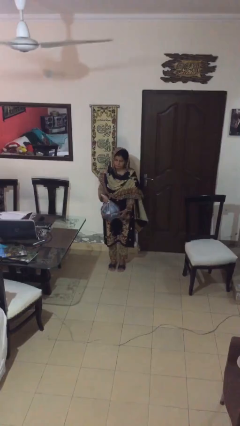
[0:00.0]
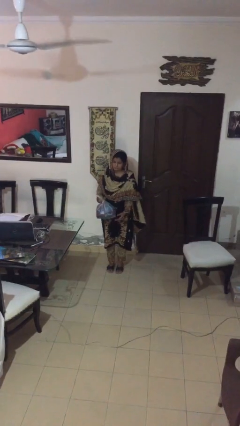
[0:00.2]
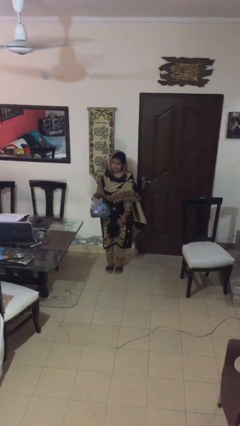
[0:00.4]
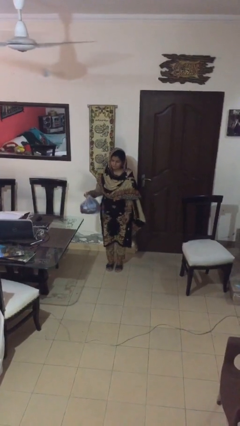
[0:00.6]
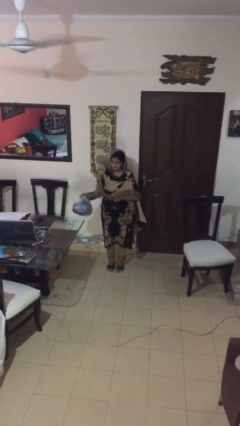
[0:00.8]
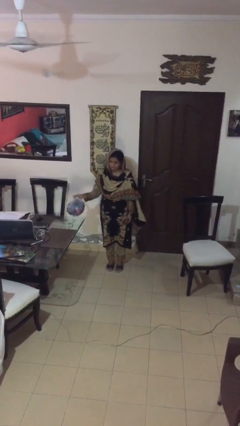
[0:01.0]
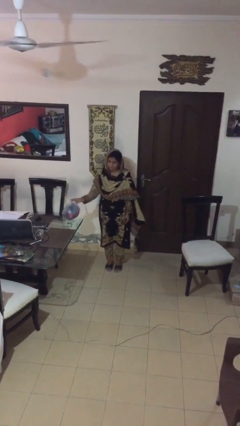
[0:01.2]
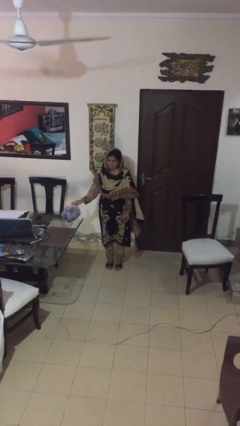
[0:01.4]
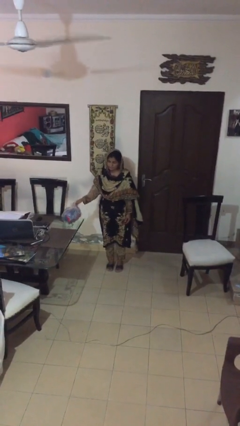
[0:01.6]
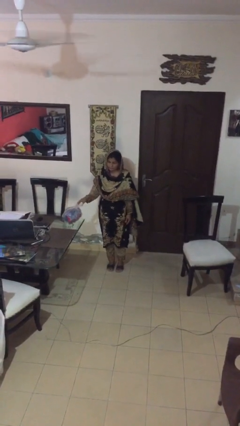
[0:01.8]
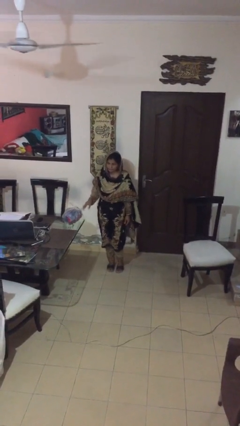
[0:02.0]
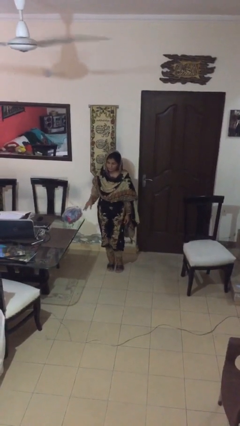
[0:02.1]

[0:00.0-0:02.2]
person puts down object on table

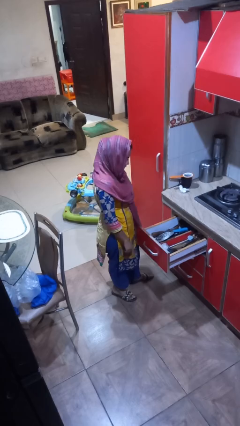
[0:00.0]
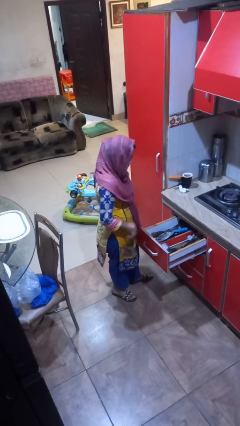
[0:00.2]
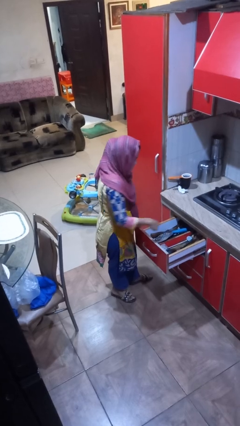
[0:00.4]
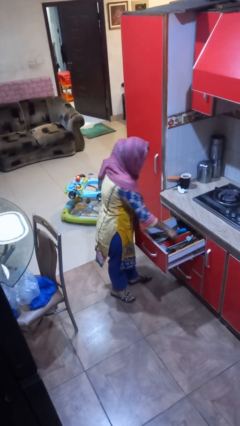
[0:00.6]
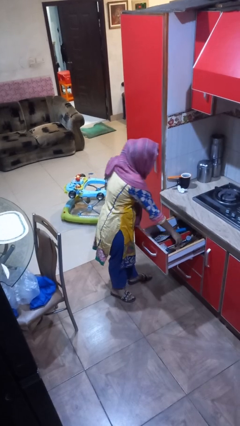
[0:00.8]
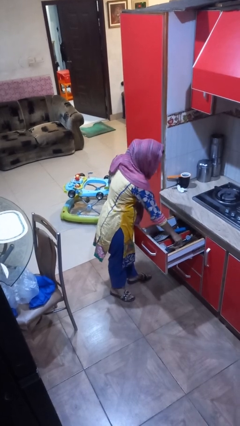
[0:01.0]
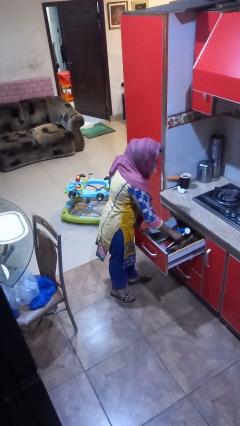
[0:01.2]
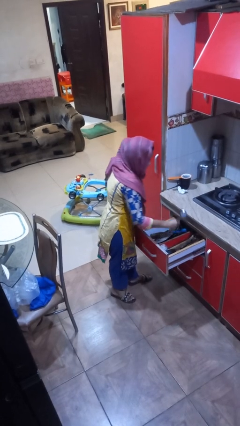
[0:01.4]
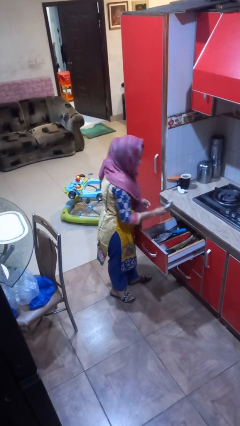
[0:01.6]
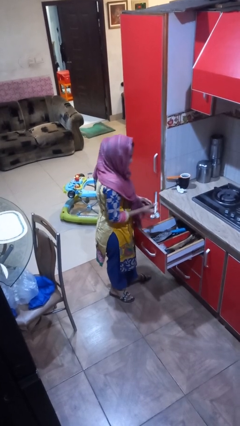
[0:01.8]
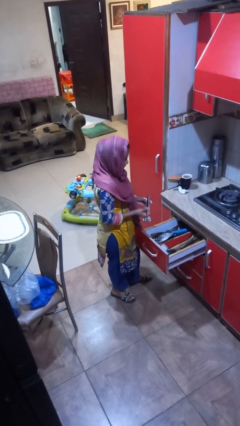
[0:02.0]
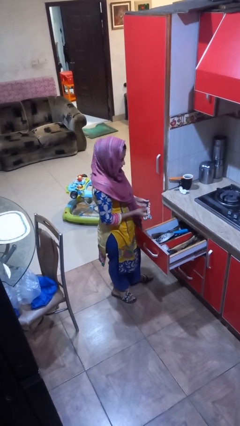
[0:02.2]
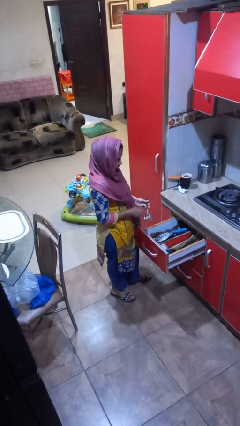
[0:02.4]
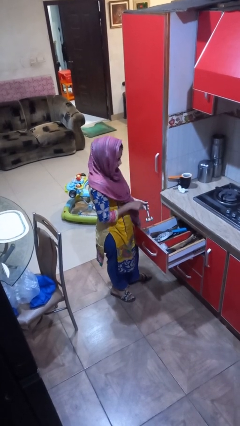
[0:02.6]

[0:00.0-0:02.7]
person takes object from kitchen drawer

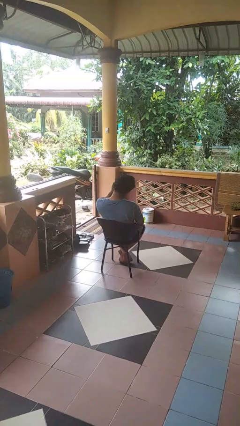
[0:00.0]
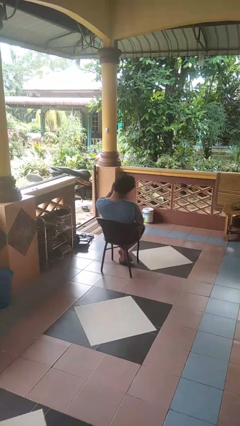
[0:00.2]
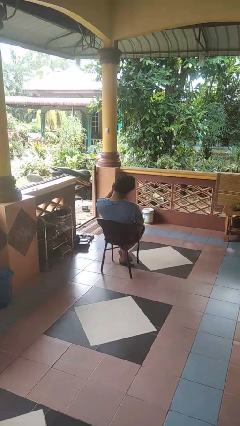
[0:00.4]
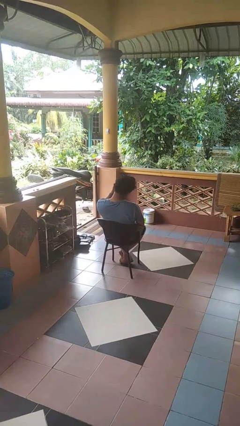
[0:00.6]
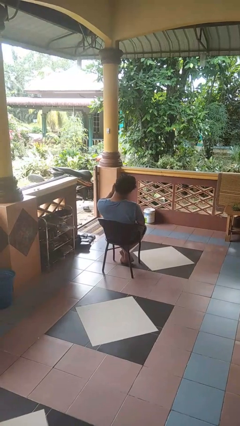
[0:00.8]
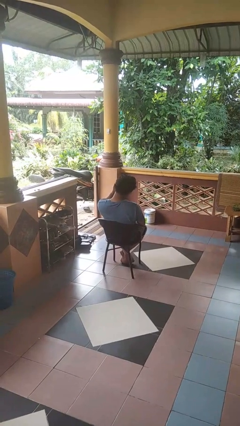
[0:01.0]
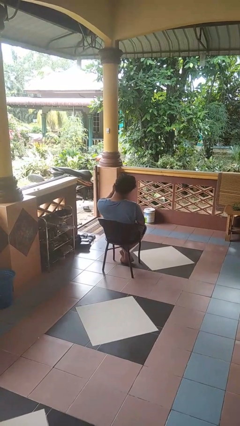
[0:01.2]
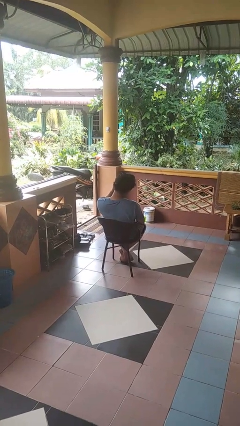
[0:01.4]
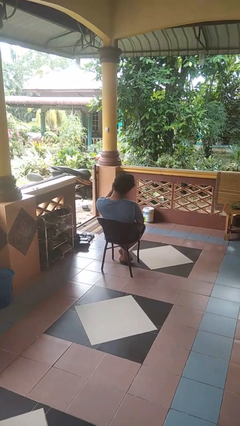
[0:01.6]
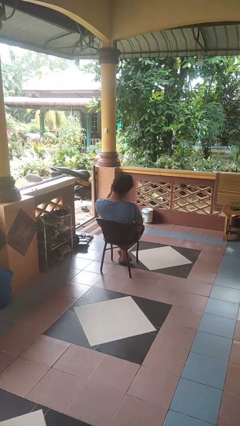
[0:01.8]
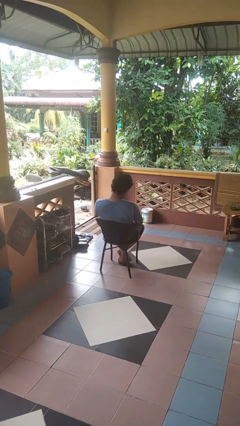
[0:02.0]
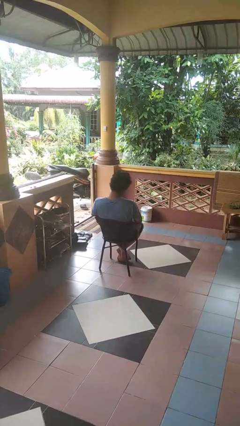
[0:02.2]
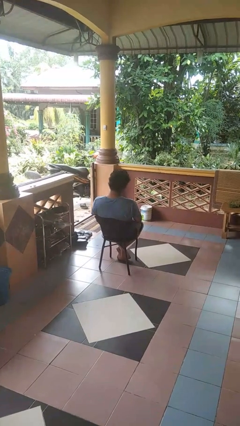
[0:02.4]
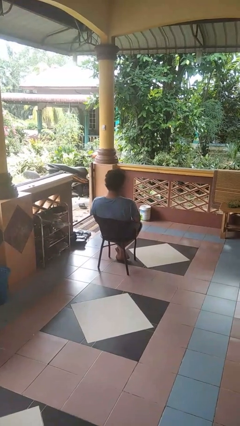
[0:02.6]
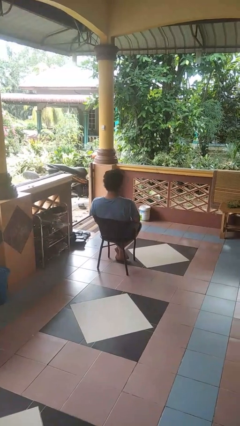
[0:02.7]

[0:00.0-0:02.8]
person touches earlobe

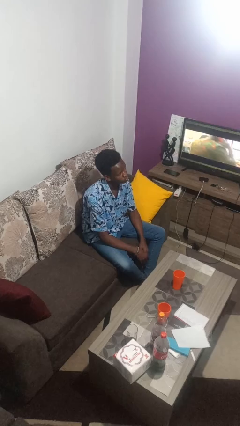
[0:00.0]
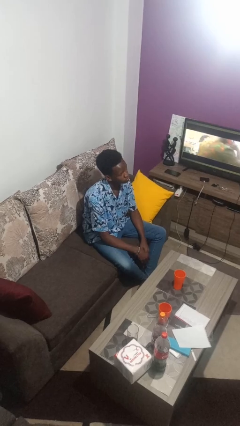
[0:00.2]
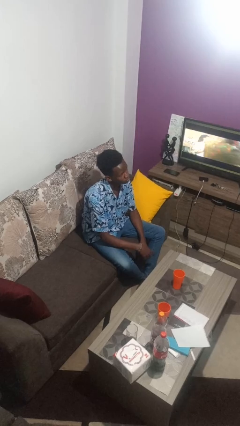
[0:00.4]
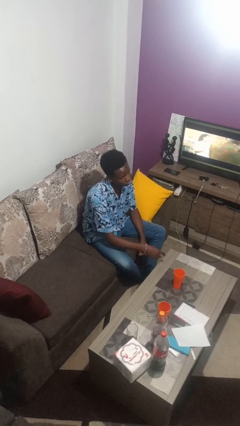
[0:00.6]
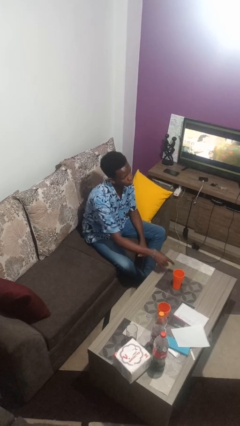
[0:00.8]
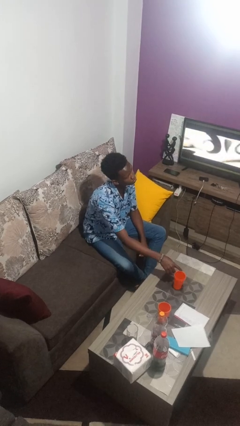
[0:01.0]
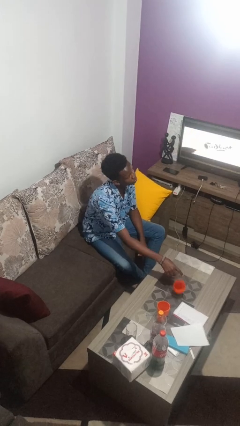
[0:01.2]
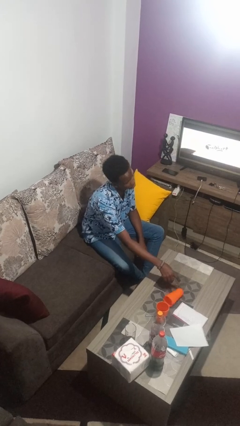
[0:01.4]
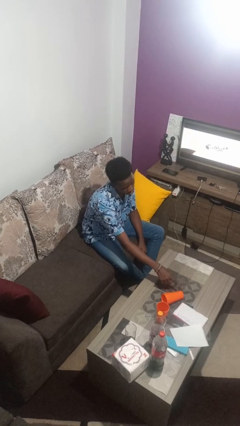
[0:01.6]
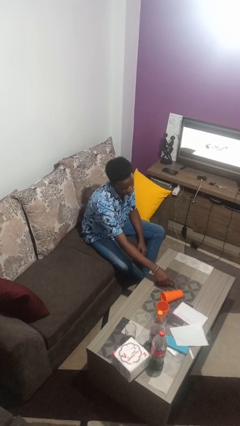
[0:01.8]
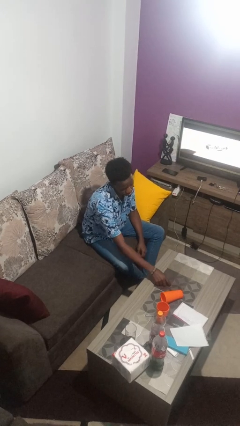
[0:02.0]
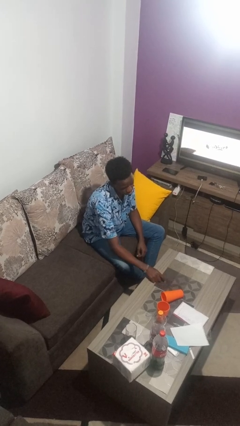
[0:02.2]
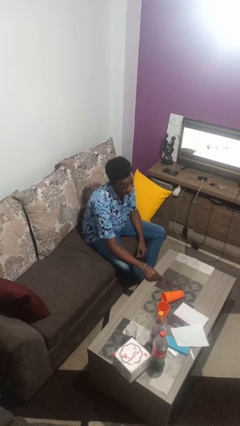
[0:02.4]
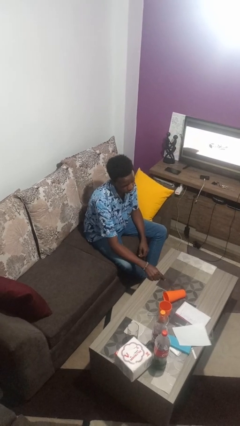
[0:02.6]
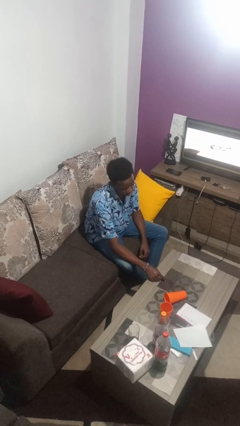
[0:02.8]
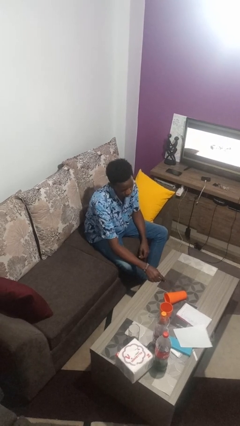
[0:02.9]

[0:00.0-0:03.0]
person knocks over glass

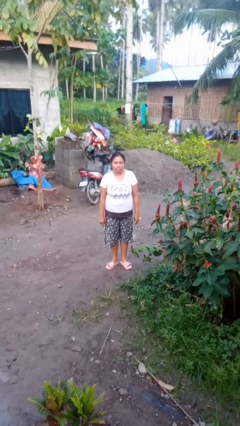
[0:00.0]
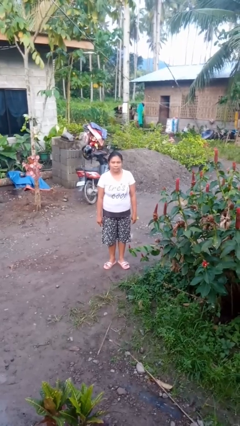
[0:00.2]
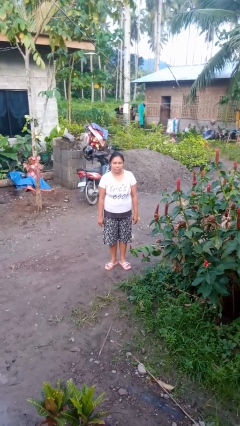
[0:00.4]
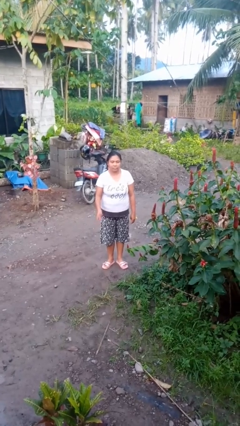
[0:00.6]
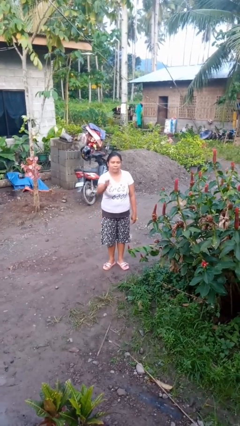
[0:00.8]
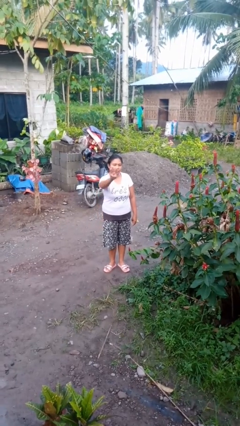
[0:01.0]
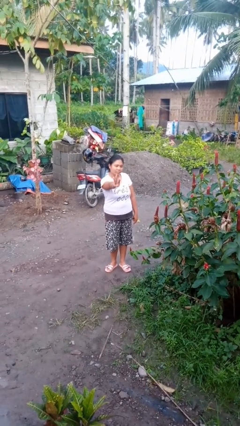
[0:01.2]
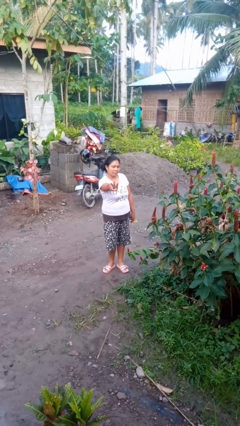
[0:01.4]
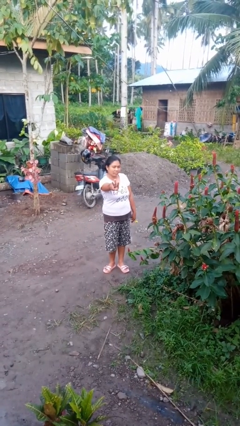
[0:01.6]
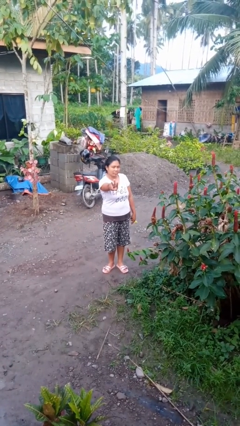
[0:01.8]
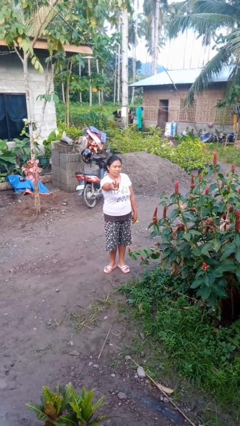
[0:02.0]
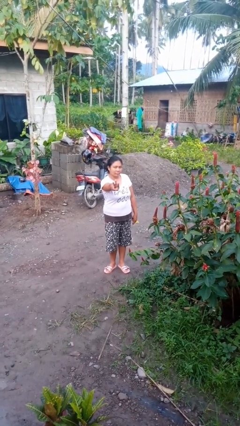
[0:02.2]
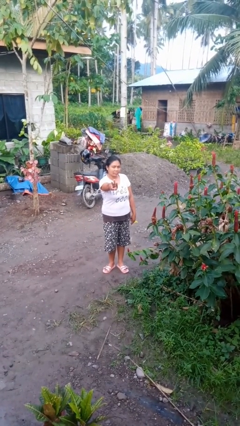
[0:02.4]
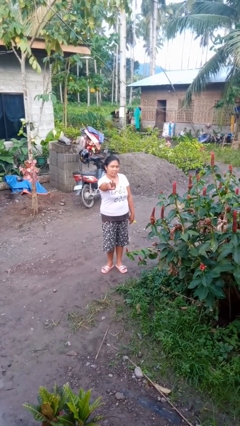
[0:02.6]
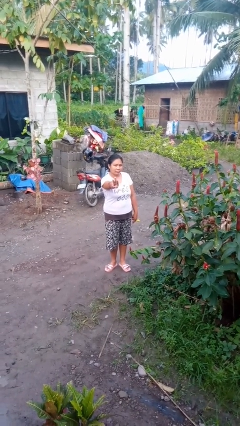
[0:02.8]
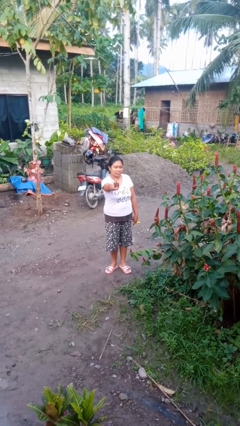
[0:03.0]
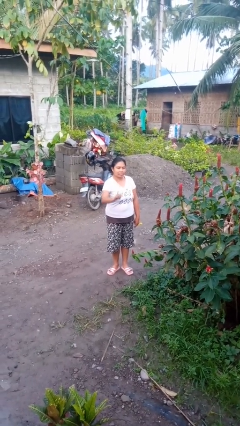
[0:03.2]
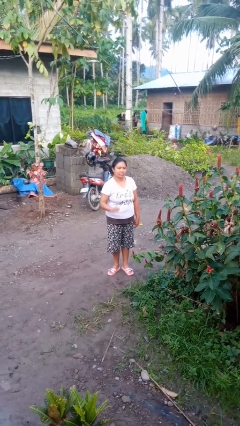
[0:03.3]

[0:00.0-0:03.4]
person gestures number three

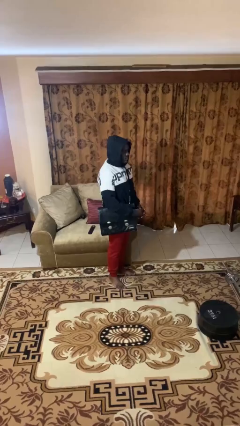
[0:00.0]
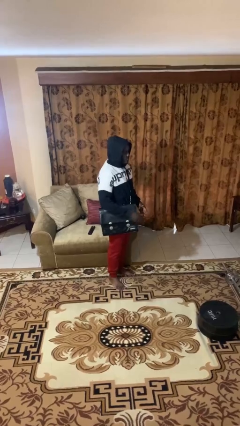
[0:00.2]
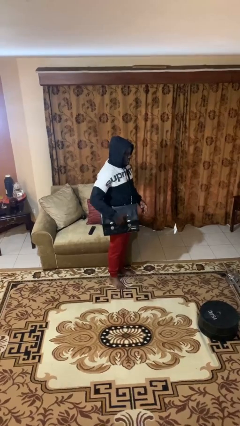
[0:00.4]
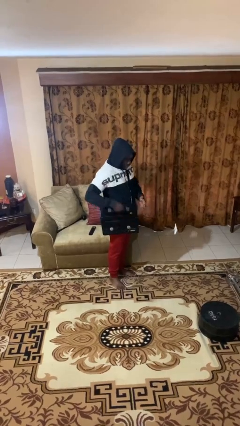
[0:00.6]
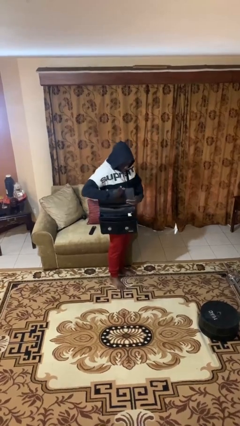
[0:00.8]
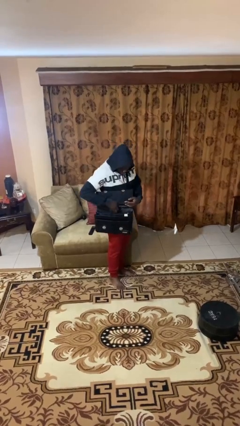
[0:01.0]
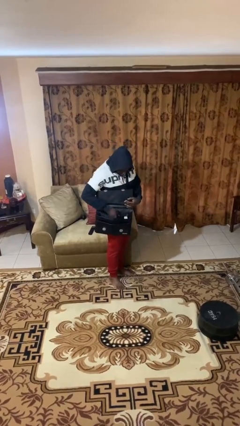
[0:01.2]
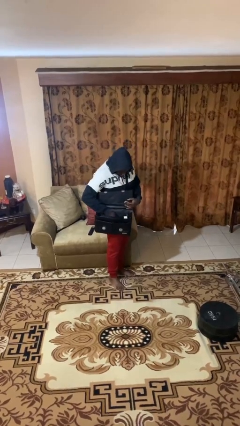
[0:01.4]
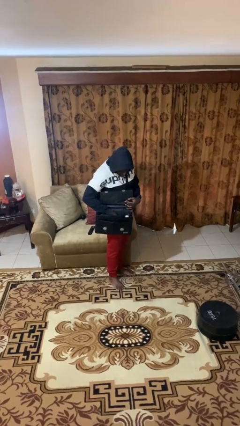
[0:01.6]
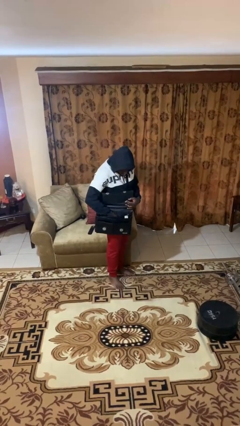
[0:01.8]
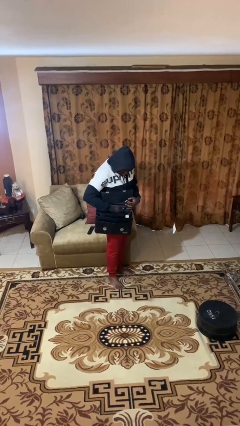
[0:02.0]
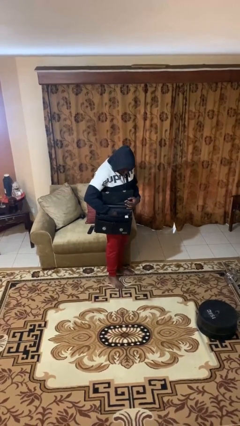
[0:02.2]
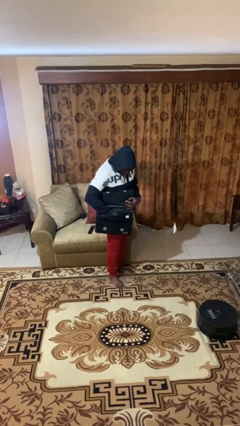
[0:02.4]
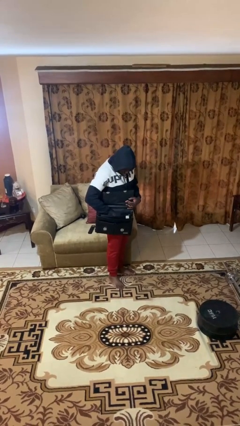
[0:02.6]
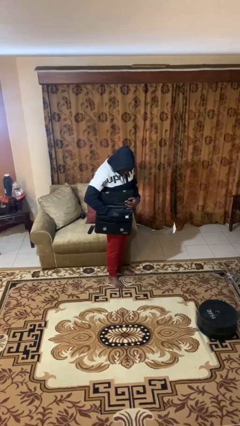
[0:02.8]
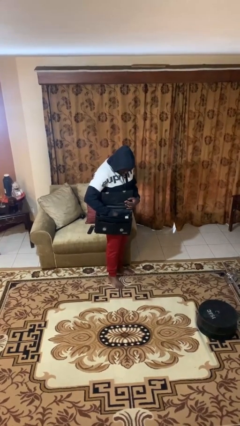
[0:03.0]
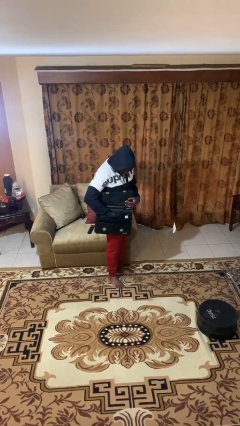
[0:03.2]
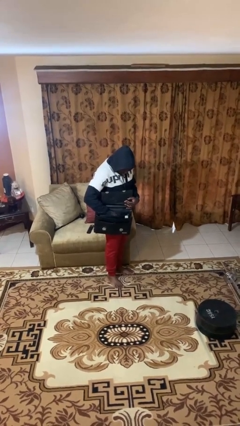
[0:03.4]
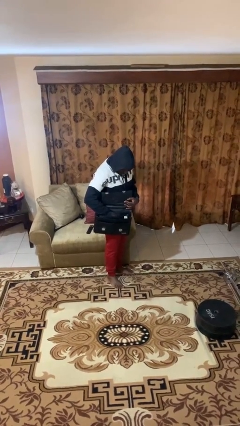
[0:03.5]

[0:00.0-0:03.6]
person searches in purse
